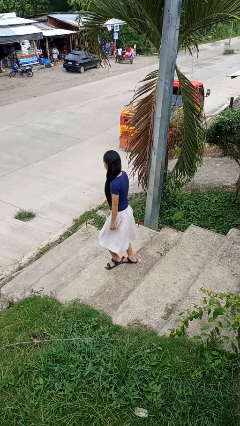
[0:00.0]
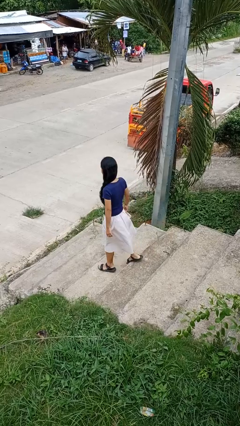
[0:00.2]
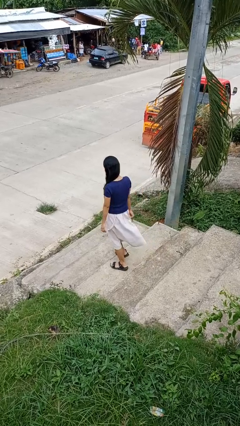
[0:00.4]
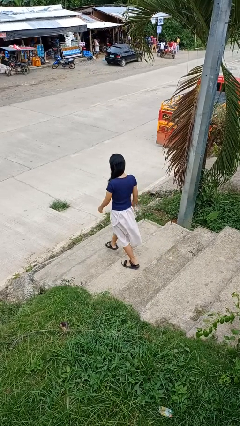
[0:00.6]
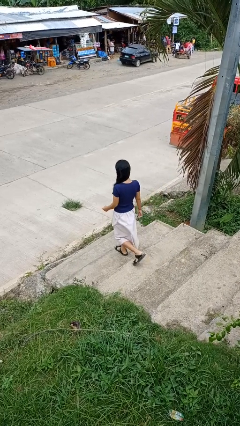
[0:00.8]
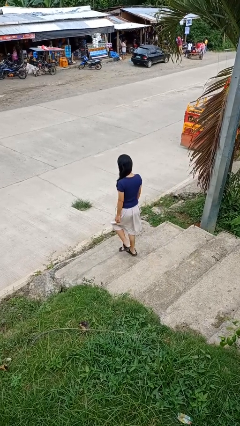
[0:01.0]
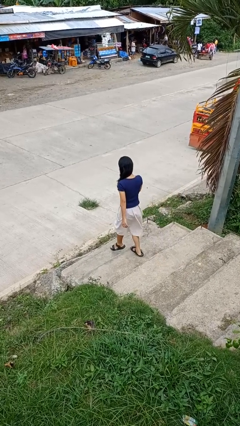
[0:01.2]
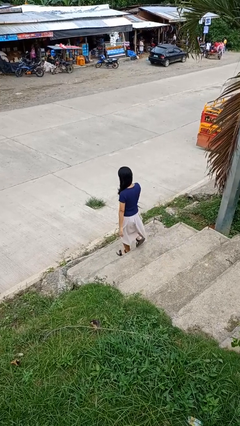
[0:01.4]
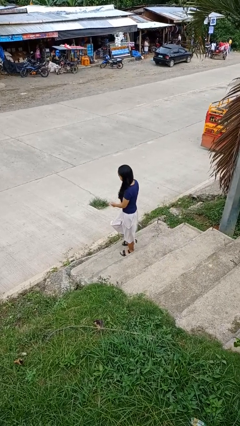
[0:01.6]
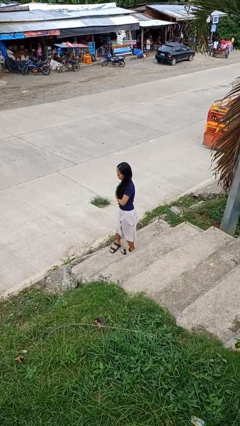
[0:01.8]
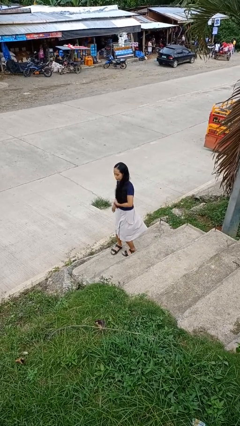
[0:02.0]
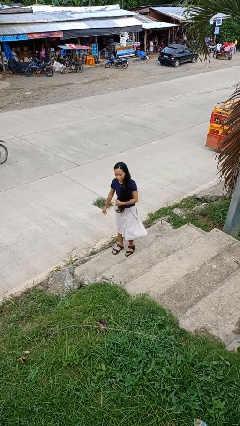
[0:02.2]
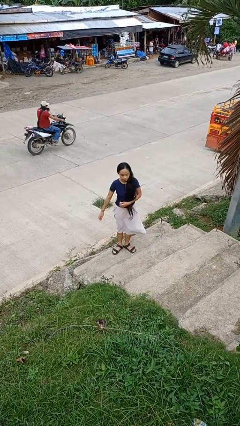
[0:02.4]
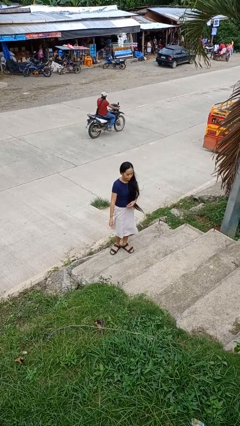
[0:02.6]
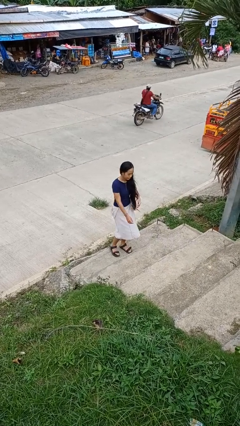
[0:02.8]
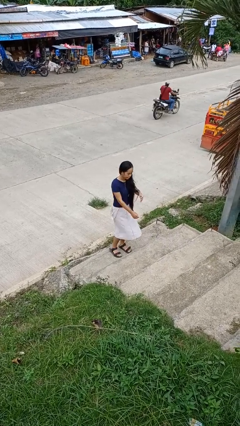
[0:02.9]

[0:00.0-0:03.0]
person climbs down stairs

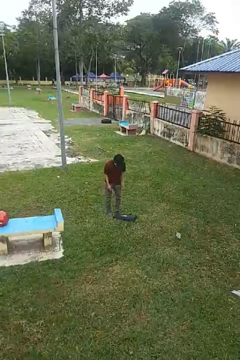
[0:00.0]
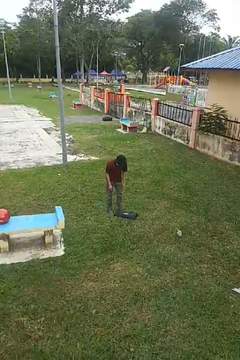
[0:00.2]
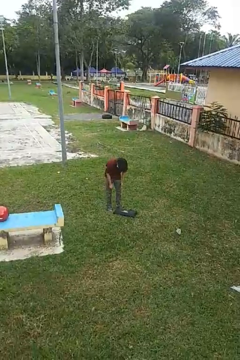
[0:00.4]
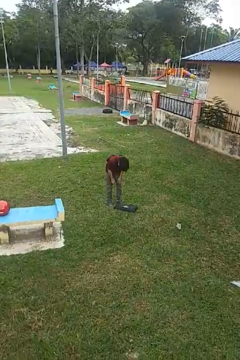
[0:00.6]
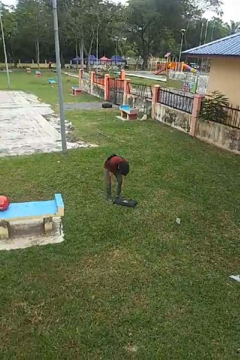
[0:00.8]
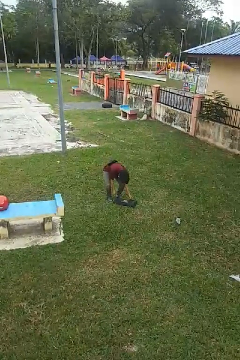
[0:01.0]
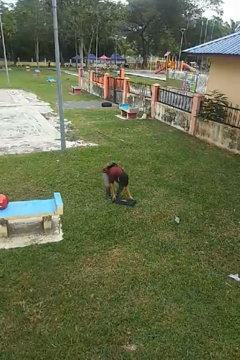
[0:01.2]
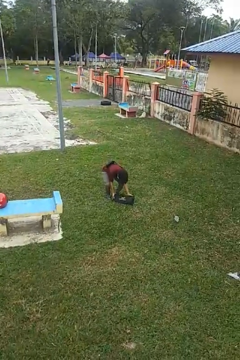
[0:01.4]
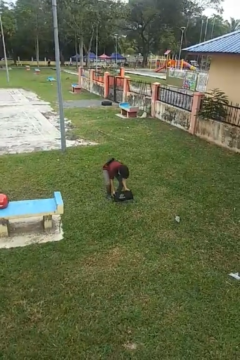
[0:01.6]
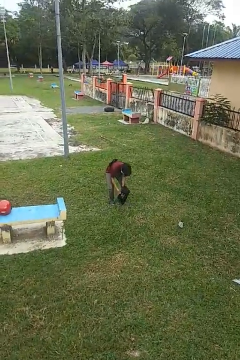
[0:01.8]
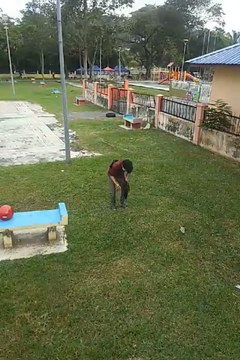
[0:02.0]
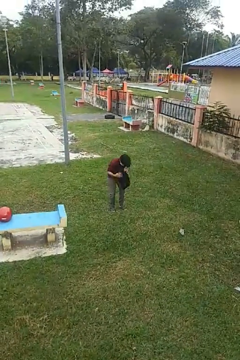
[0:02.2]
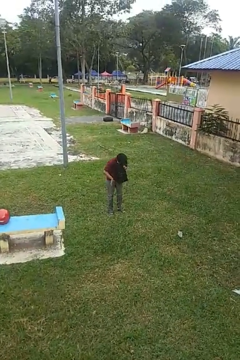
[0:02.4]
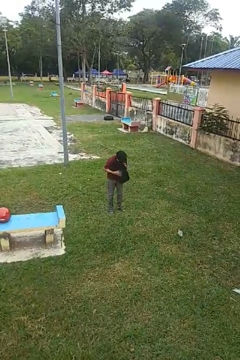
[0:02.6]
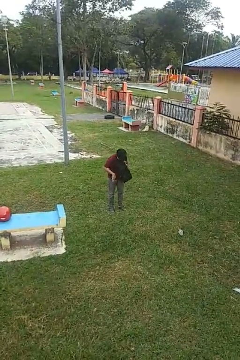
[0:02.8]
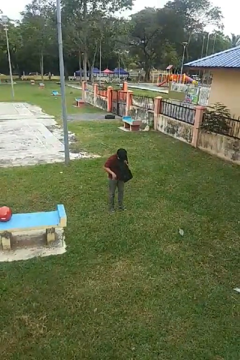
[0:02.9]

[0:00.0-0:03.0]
person picks up object from floor

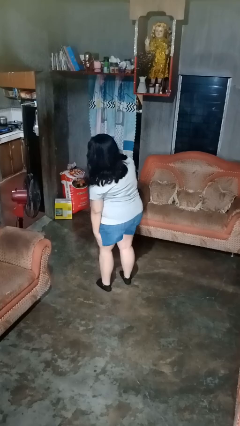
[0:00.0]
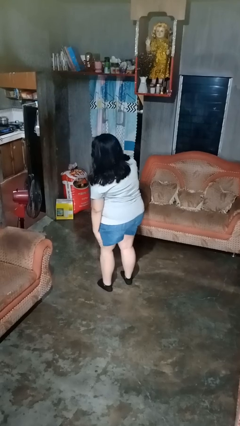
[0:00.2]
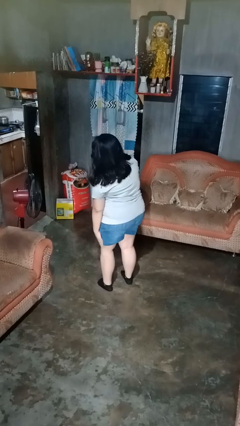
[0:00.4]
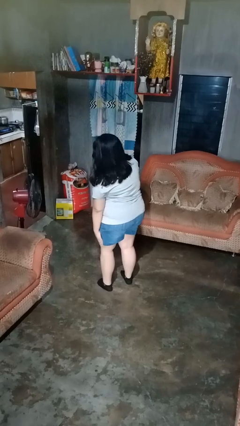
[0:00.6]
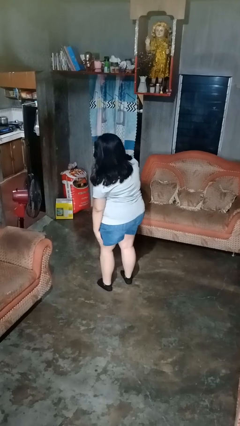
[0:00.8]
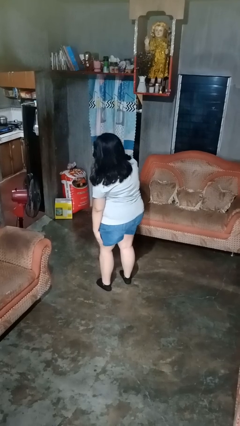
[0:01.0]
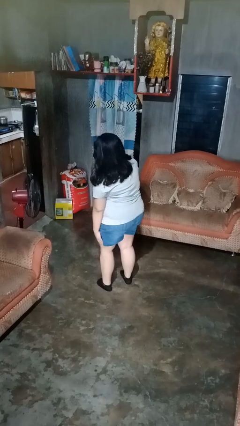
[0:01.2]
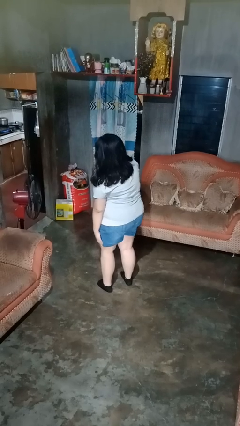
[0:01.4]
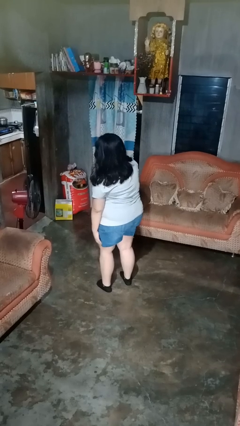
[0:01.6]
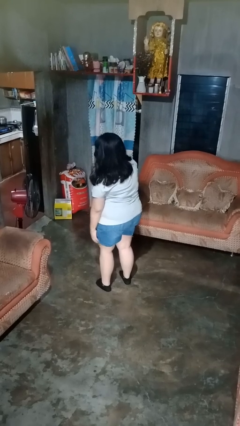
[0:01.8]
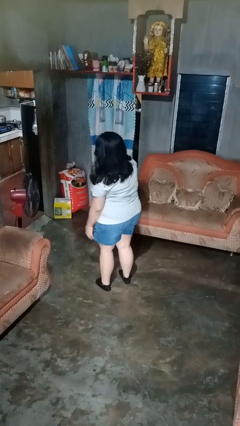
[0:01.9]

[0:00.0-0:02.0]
person swats bug

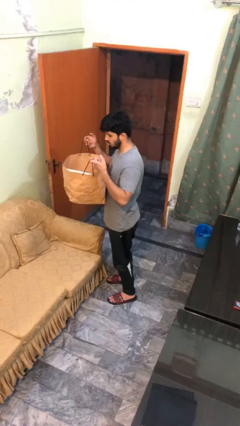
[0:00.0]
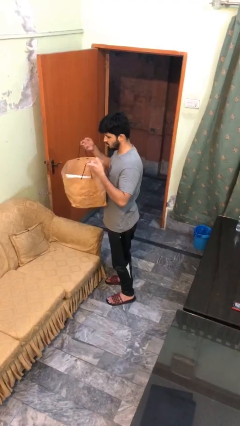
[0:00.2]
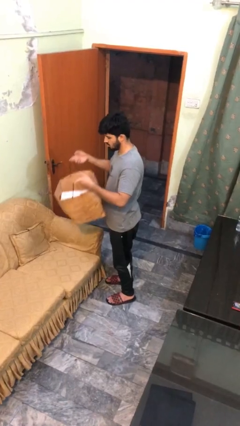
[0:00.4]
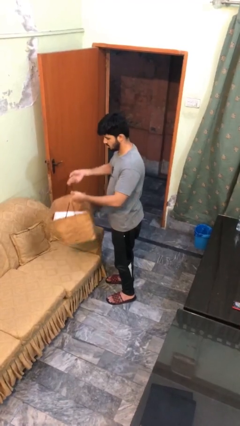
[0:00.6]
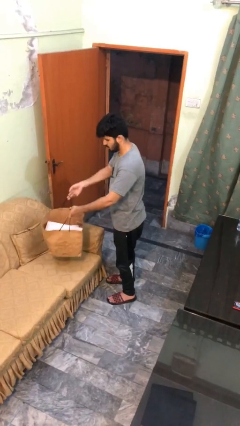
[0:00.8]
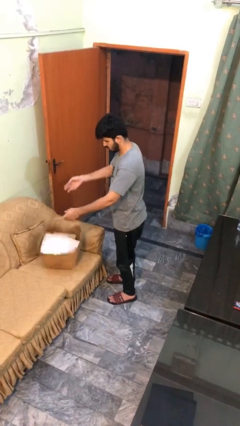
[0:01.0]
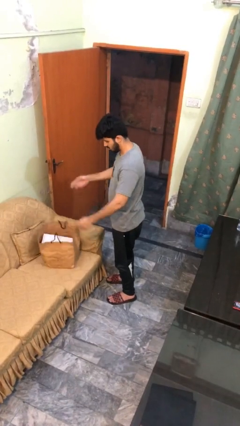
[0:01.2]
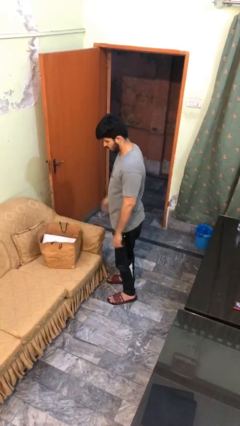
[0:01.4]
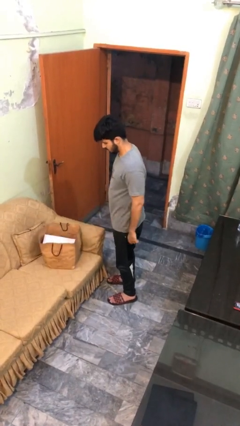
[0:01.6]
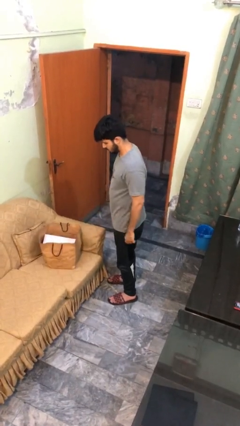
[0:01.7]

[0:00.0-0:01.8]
person puts down object on couch

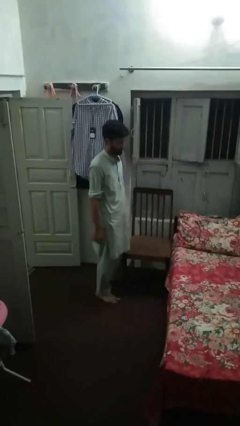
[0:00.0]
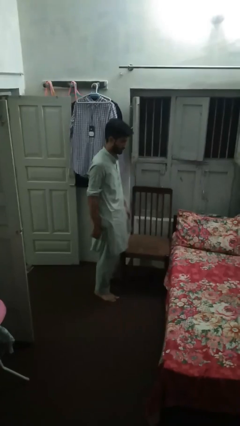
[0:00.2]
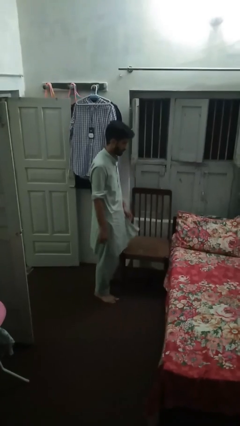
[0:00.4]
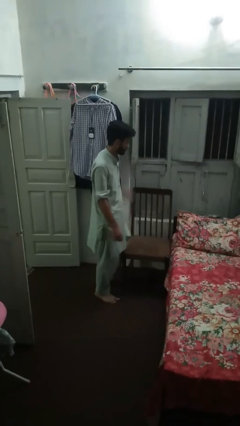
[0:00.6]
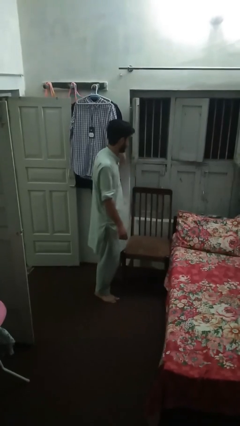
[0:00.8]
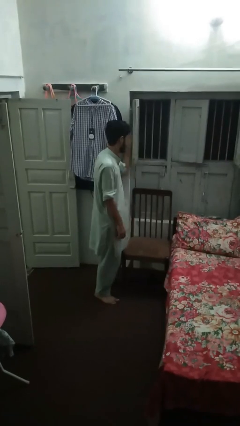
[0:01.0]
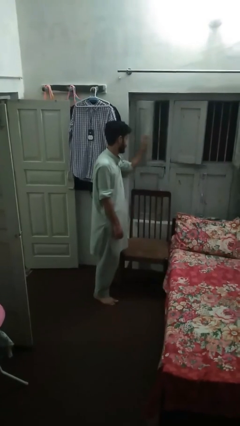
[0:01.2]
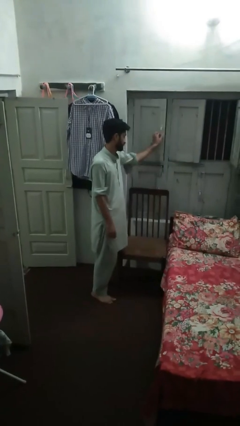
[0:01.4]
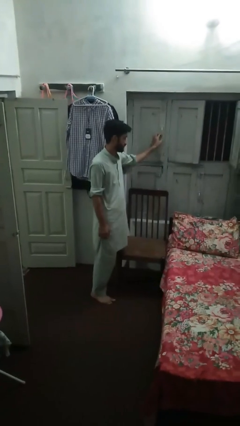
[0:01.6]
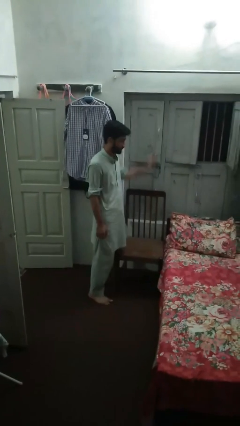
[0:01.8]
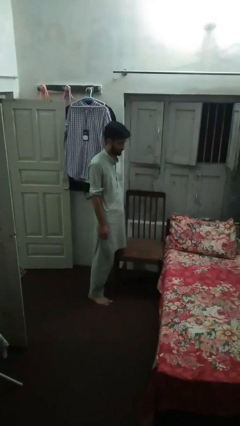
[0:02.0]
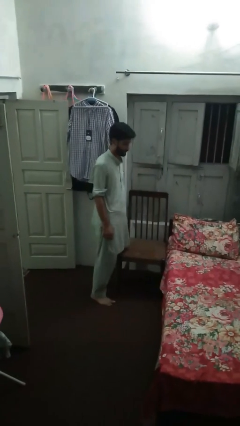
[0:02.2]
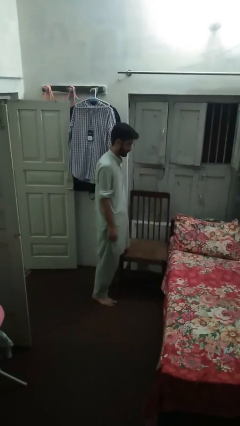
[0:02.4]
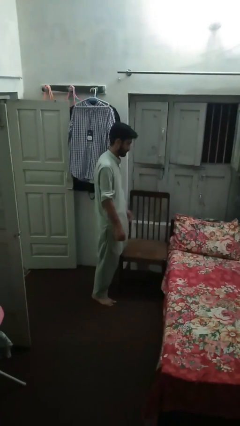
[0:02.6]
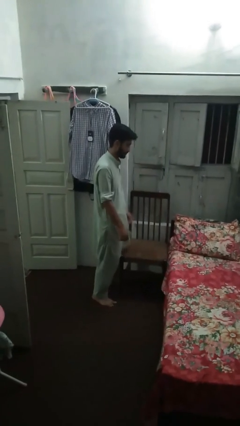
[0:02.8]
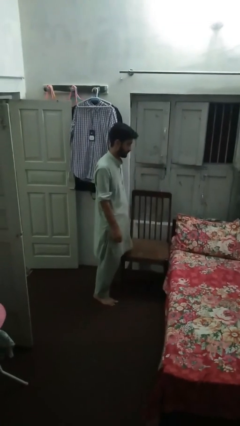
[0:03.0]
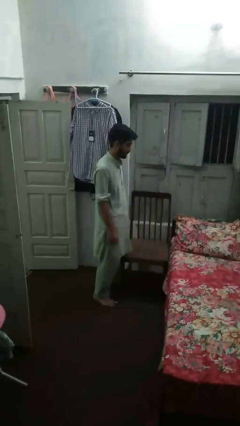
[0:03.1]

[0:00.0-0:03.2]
person closes home window

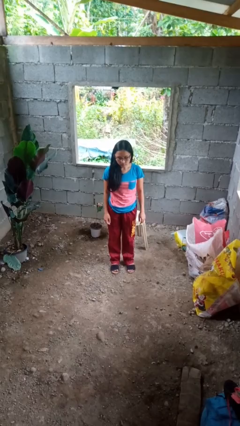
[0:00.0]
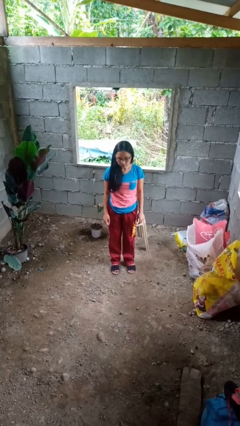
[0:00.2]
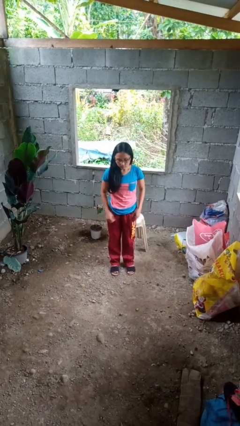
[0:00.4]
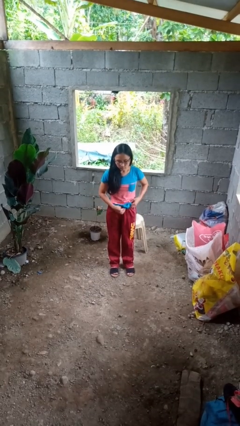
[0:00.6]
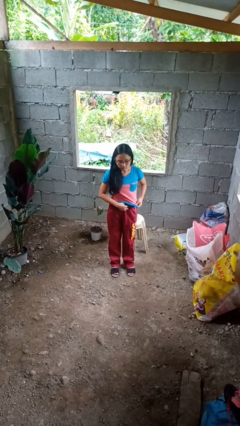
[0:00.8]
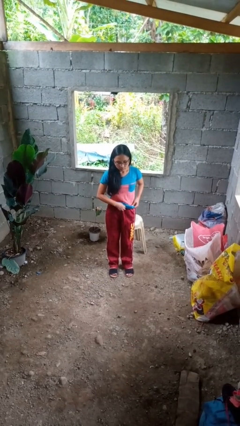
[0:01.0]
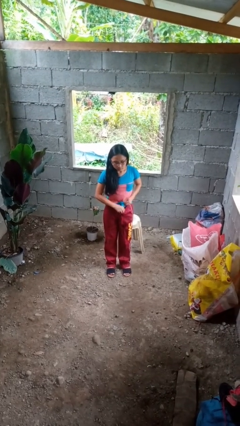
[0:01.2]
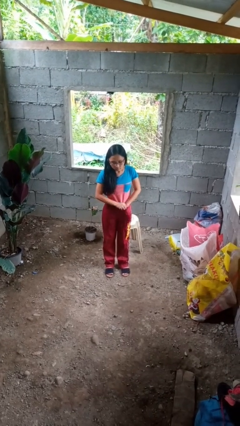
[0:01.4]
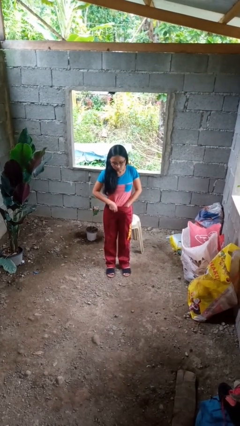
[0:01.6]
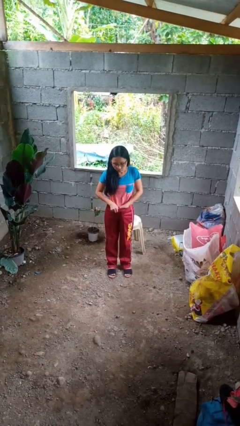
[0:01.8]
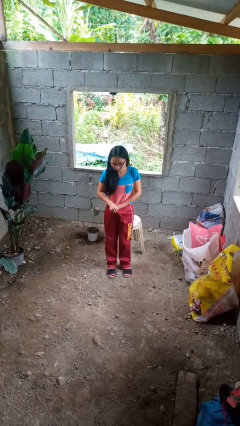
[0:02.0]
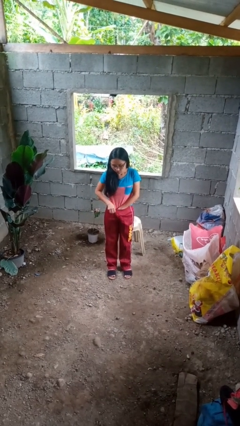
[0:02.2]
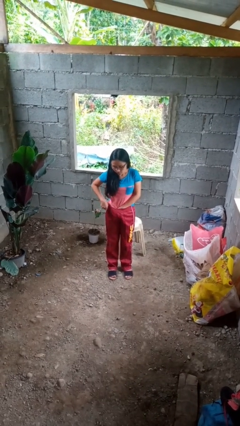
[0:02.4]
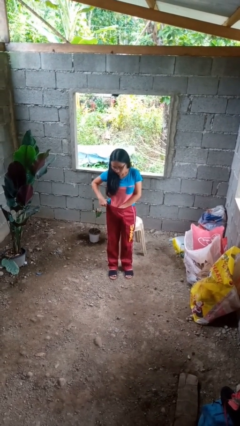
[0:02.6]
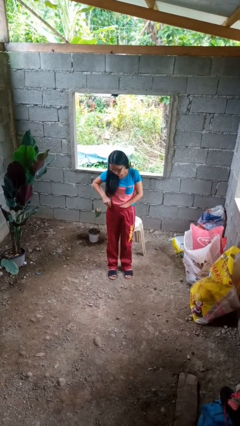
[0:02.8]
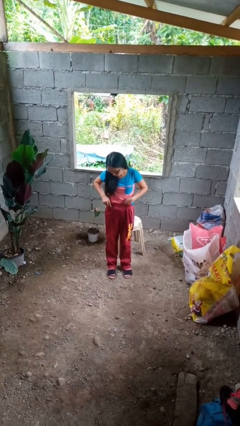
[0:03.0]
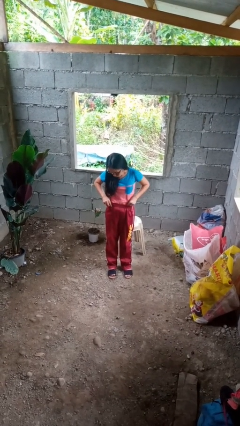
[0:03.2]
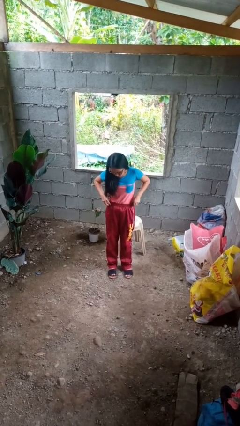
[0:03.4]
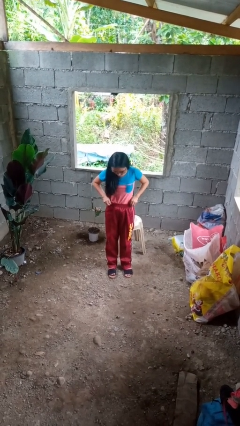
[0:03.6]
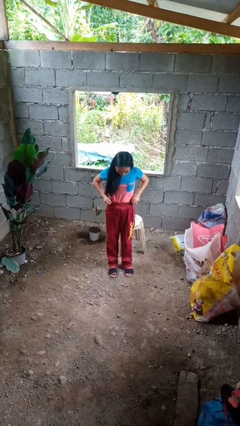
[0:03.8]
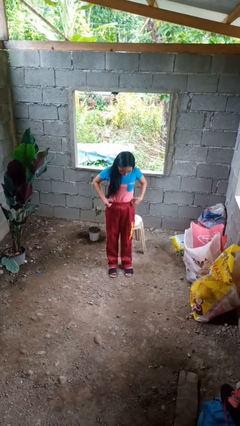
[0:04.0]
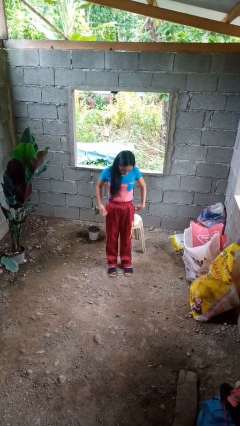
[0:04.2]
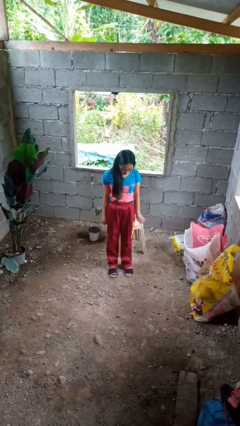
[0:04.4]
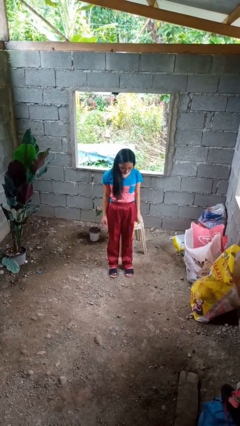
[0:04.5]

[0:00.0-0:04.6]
person tucks in shirt

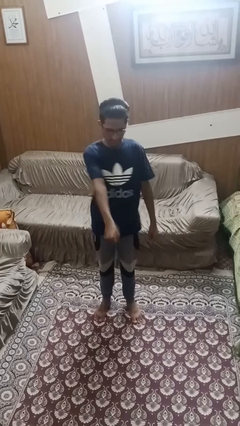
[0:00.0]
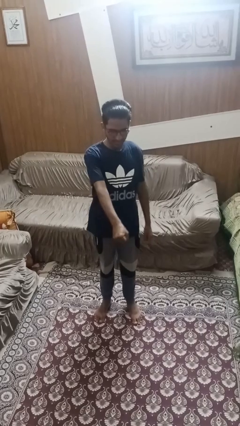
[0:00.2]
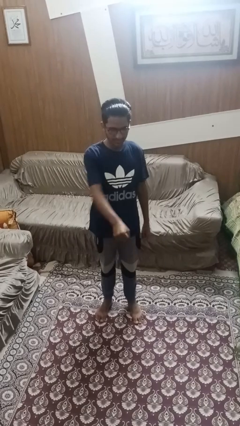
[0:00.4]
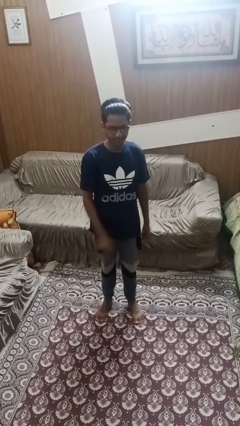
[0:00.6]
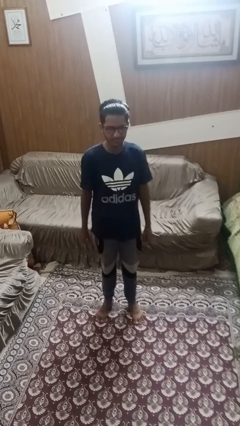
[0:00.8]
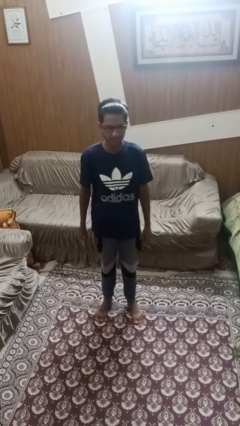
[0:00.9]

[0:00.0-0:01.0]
person punches
